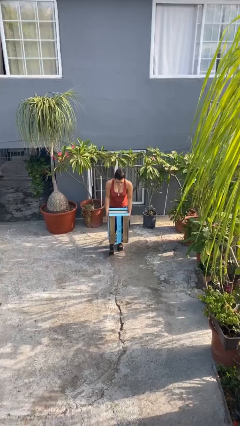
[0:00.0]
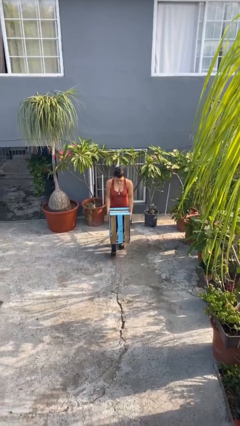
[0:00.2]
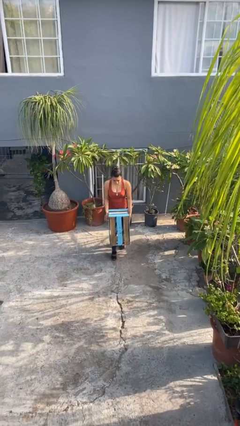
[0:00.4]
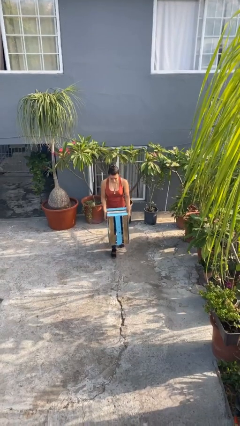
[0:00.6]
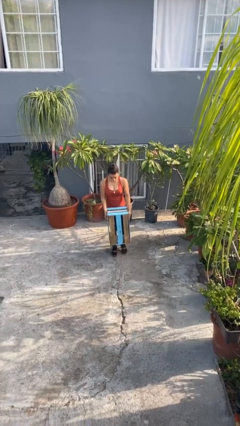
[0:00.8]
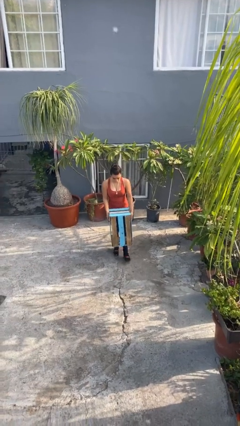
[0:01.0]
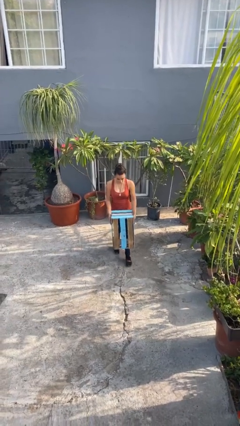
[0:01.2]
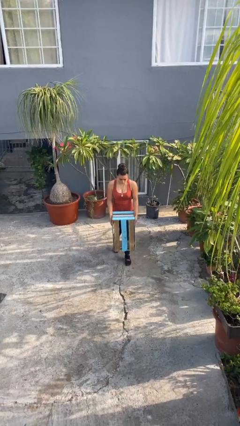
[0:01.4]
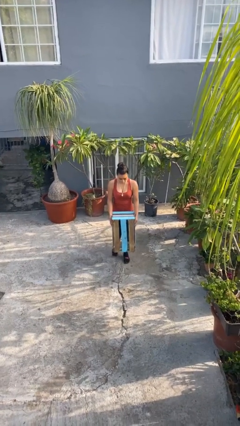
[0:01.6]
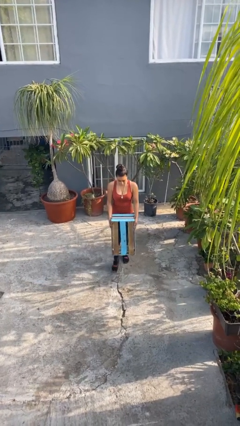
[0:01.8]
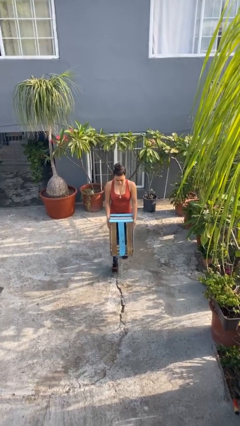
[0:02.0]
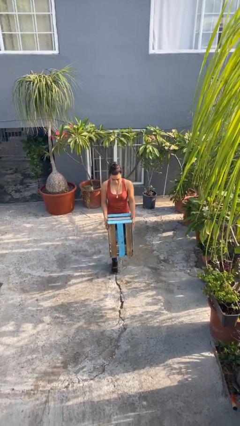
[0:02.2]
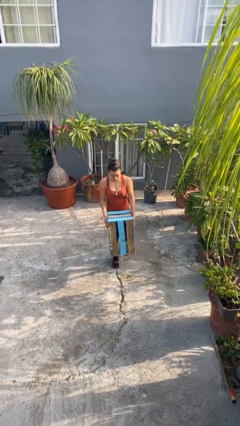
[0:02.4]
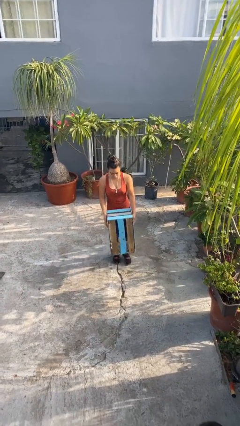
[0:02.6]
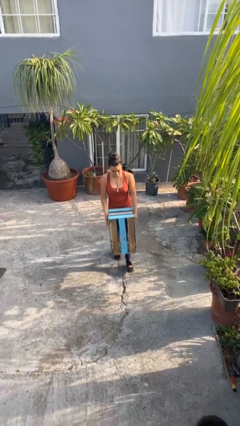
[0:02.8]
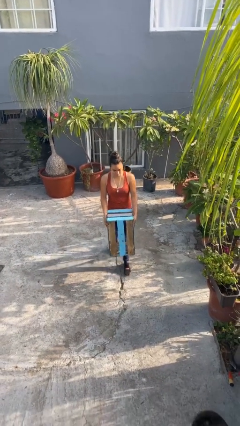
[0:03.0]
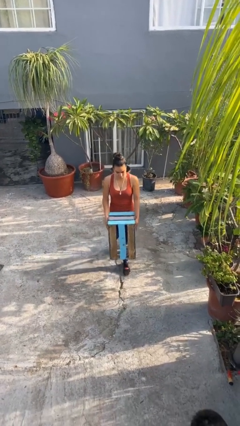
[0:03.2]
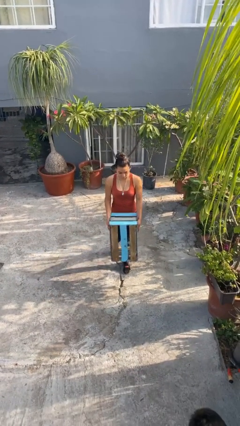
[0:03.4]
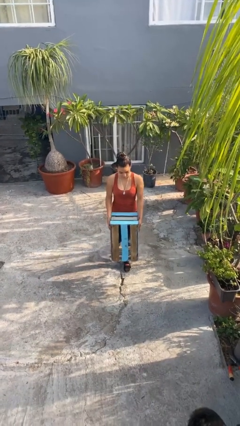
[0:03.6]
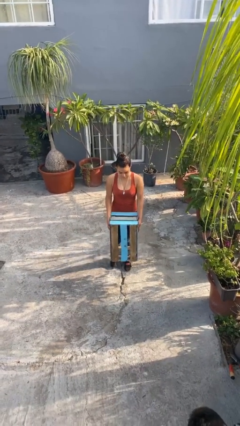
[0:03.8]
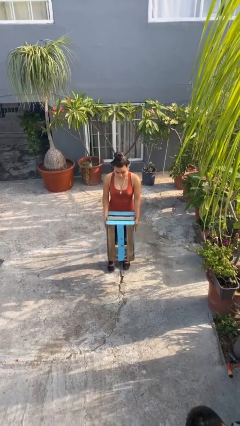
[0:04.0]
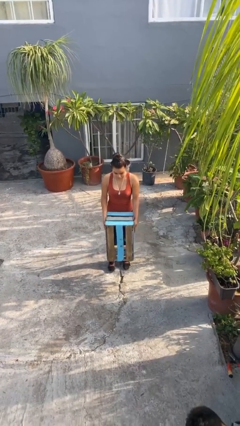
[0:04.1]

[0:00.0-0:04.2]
person carries heavy object

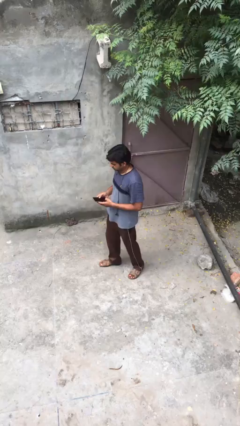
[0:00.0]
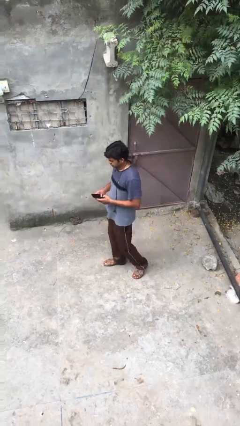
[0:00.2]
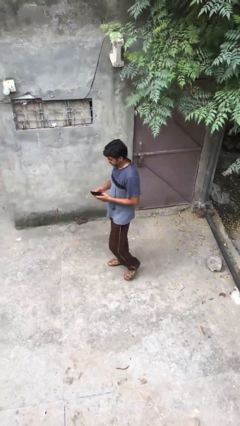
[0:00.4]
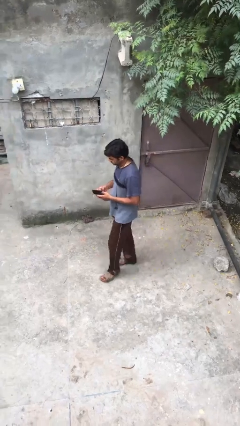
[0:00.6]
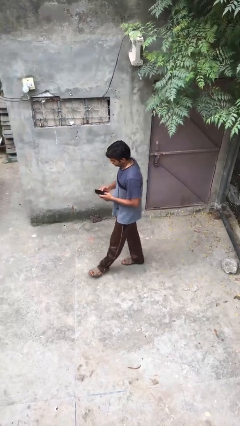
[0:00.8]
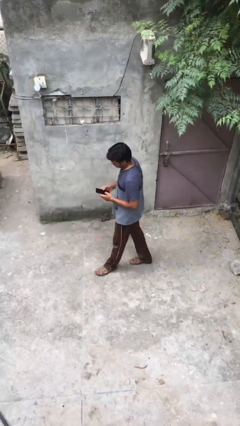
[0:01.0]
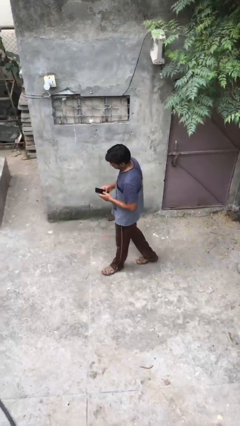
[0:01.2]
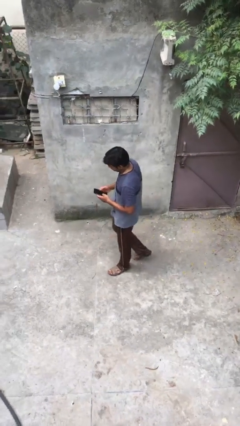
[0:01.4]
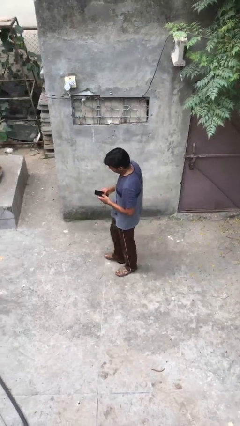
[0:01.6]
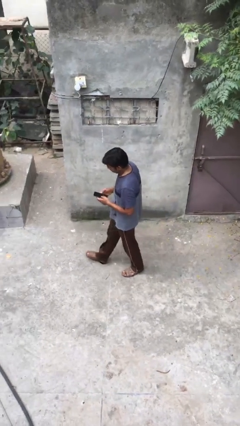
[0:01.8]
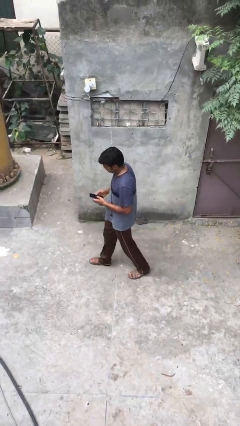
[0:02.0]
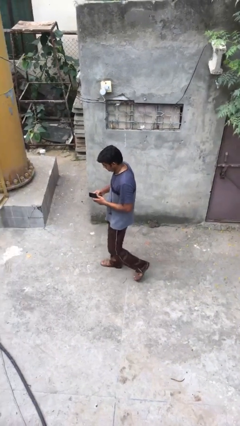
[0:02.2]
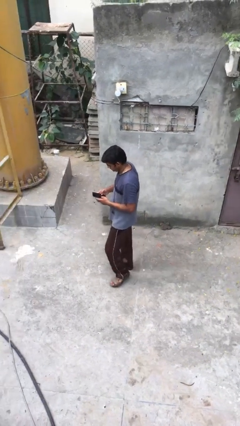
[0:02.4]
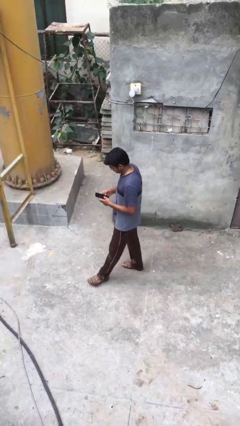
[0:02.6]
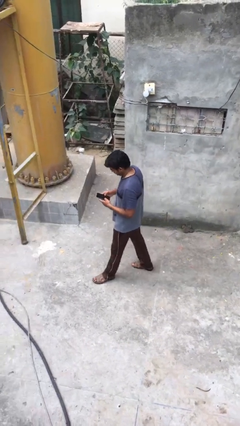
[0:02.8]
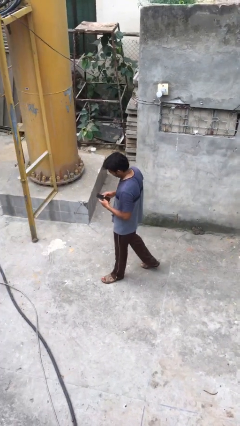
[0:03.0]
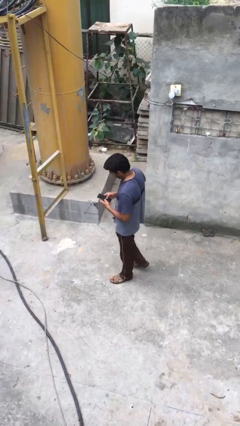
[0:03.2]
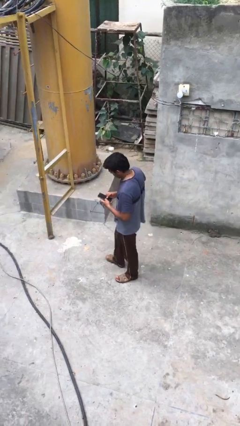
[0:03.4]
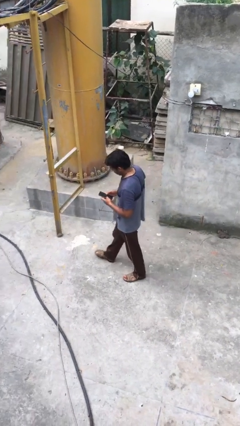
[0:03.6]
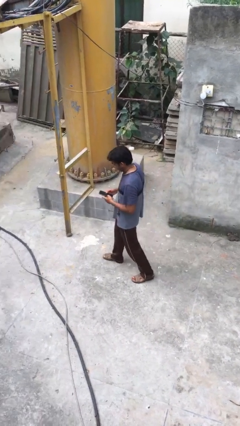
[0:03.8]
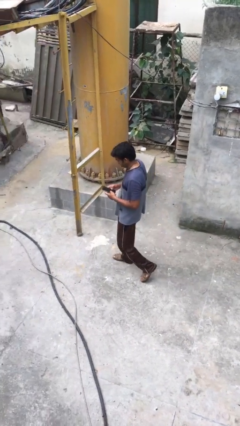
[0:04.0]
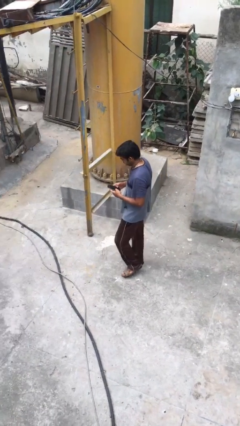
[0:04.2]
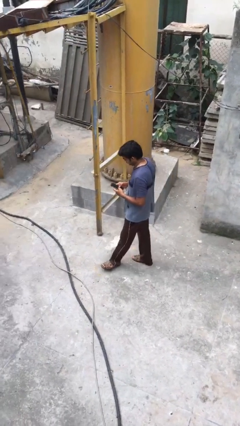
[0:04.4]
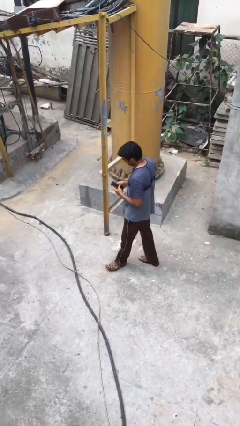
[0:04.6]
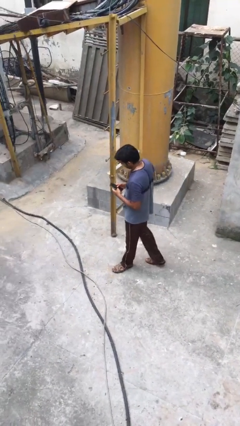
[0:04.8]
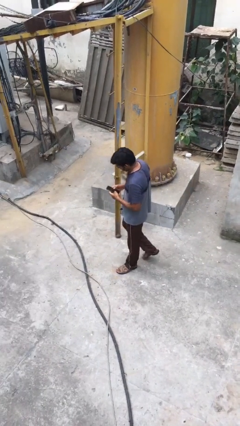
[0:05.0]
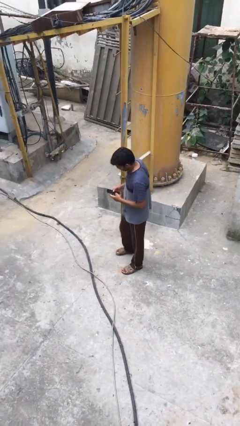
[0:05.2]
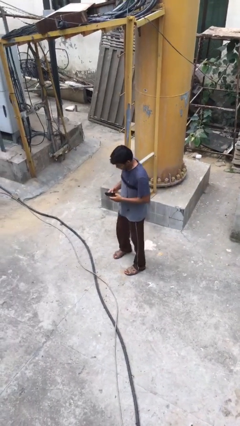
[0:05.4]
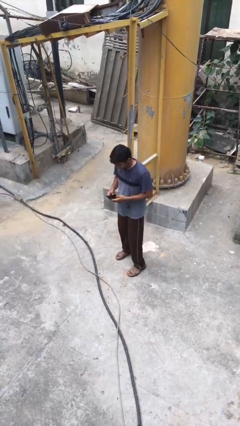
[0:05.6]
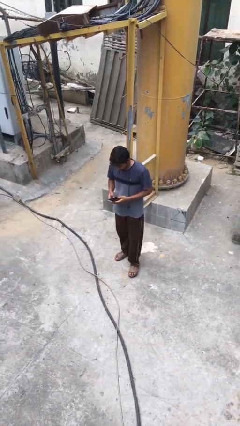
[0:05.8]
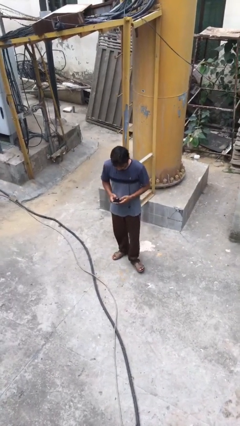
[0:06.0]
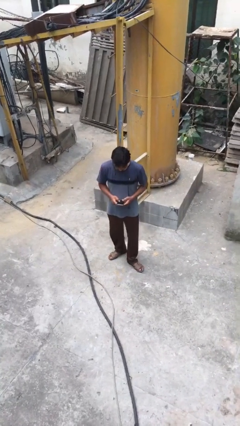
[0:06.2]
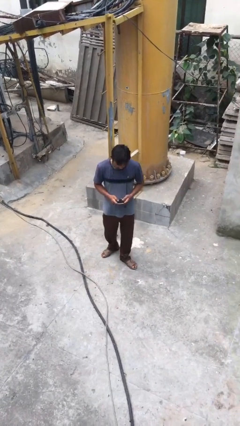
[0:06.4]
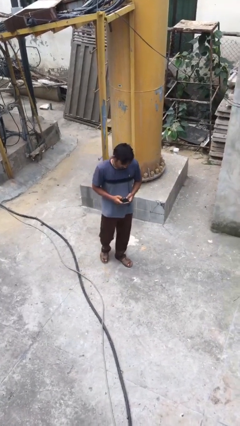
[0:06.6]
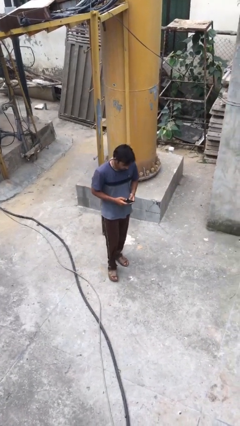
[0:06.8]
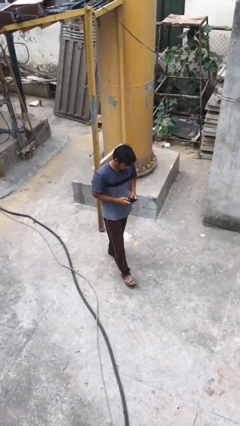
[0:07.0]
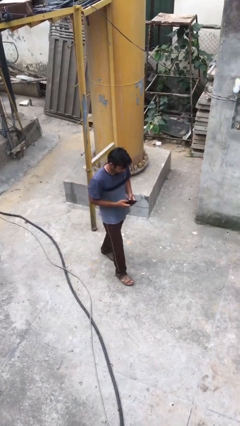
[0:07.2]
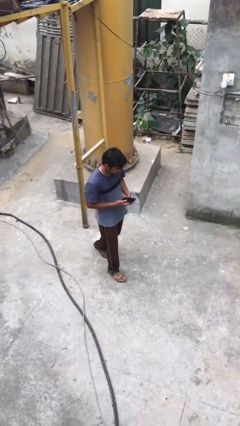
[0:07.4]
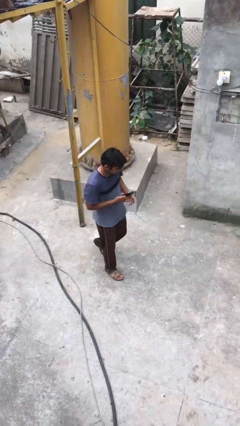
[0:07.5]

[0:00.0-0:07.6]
person texts on phone

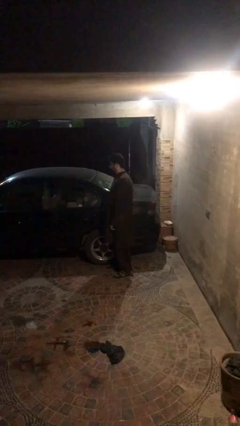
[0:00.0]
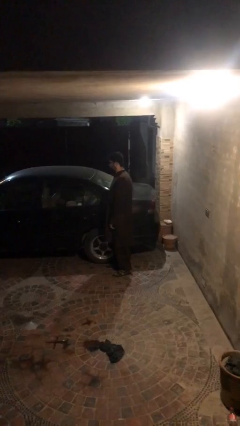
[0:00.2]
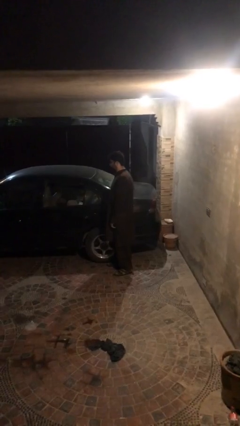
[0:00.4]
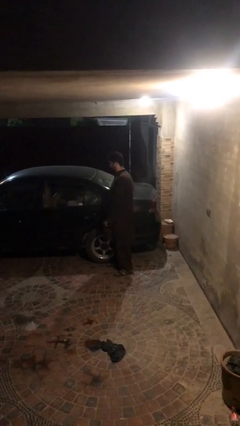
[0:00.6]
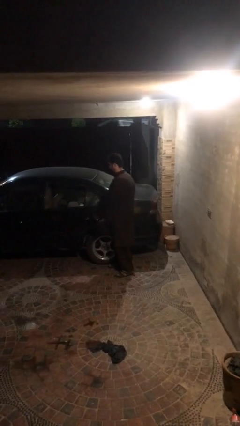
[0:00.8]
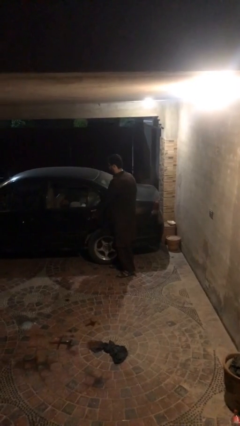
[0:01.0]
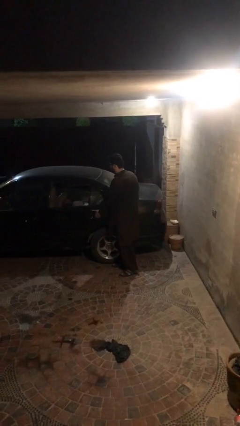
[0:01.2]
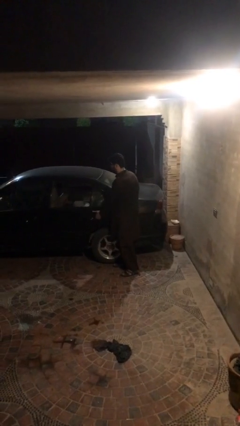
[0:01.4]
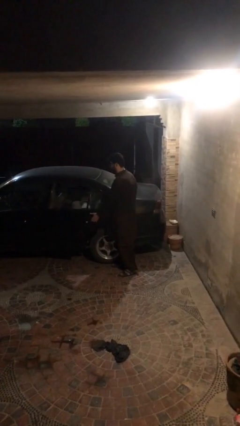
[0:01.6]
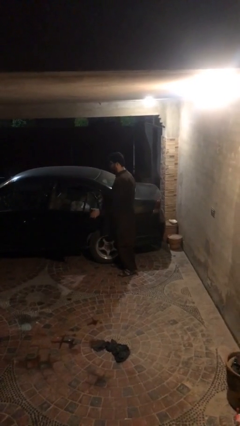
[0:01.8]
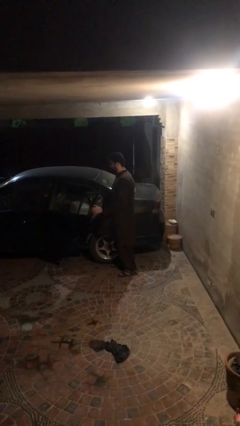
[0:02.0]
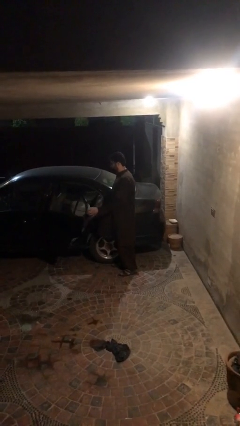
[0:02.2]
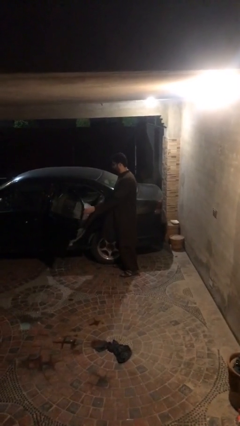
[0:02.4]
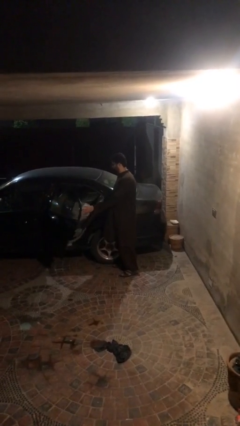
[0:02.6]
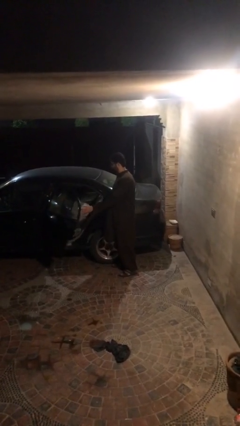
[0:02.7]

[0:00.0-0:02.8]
person opens car door

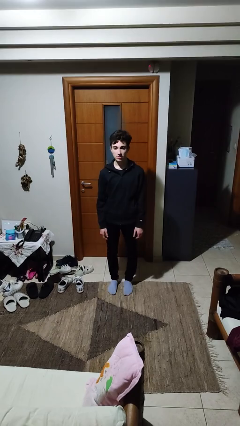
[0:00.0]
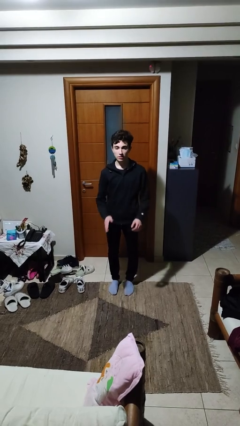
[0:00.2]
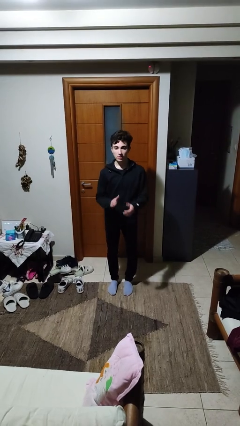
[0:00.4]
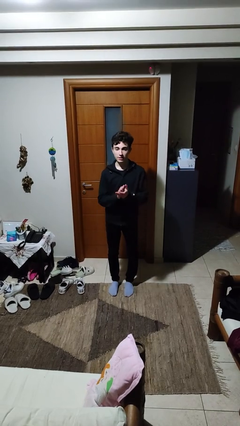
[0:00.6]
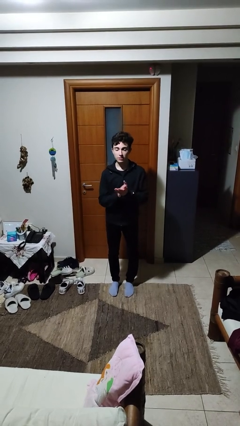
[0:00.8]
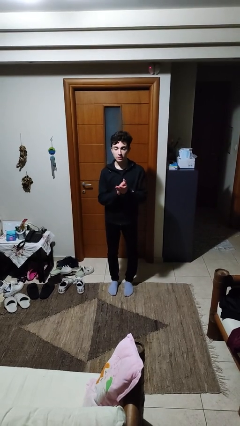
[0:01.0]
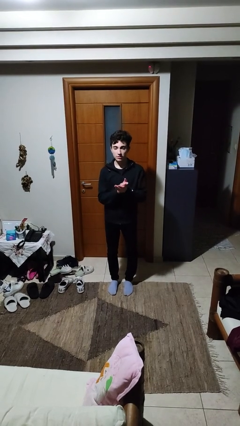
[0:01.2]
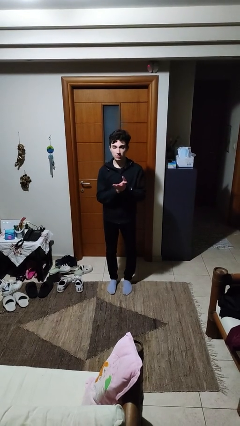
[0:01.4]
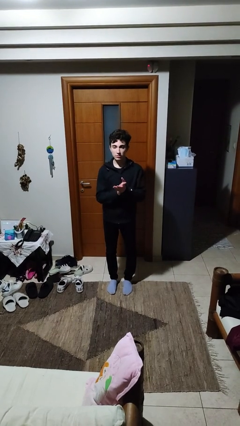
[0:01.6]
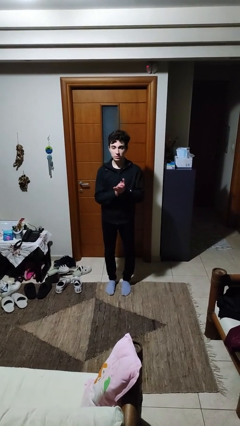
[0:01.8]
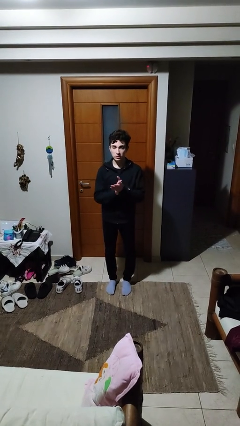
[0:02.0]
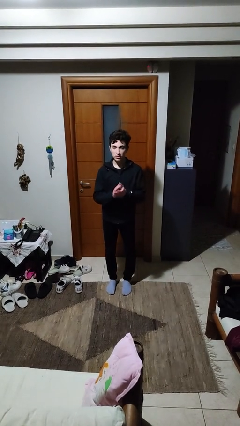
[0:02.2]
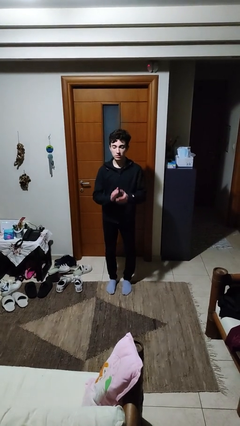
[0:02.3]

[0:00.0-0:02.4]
person claps hands

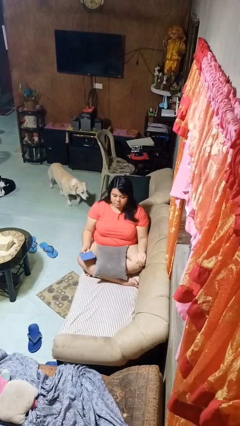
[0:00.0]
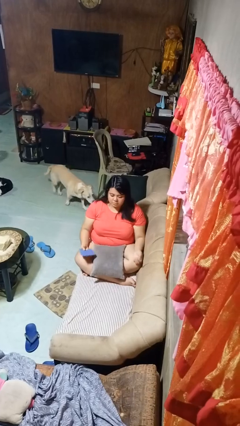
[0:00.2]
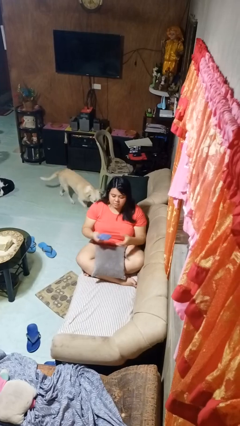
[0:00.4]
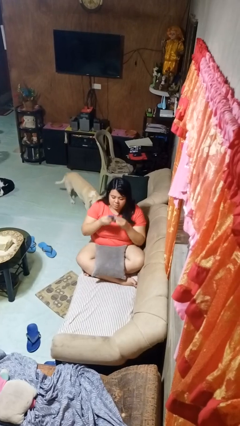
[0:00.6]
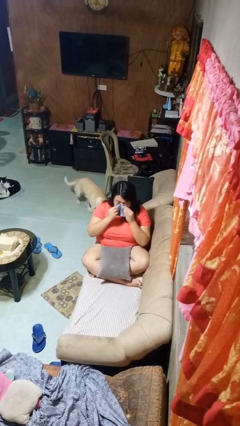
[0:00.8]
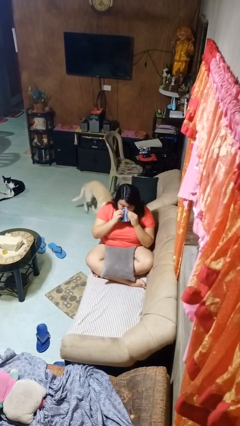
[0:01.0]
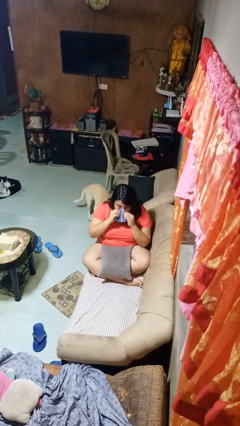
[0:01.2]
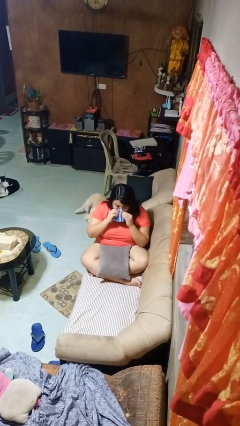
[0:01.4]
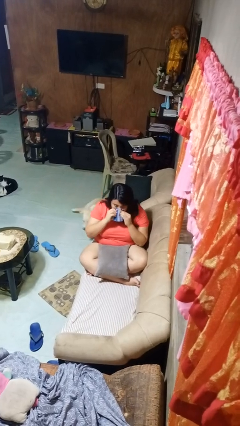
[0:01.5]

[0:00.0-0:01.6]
person blows nose
